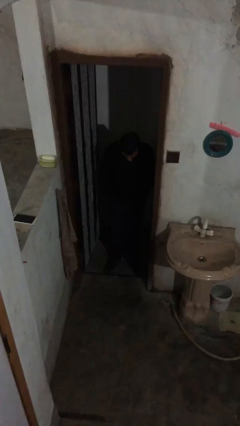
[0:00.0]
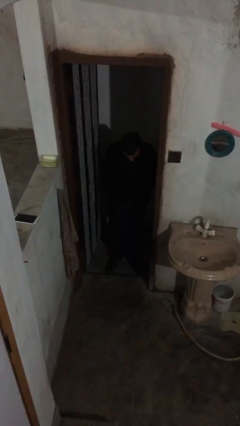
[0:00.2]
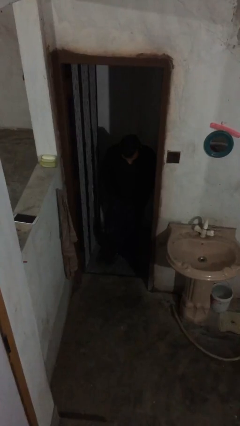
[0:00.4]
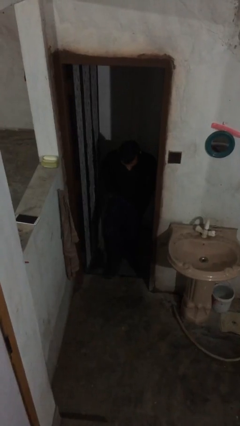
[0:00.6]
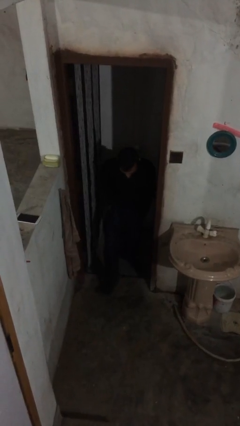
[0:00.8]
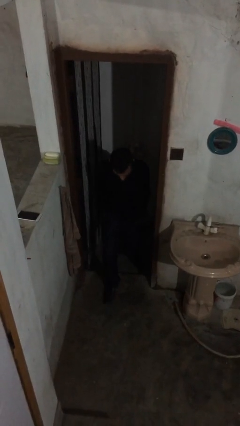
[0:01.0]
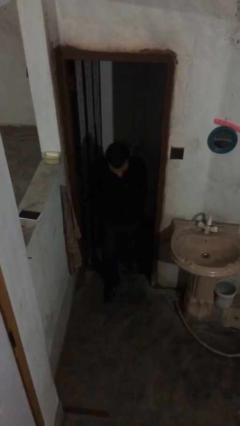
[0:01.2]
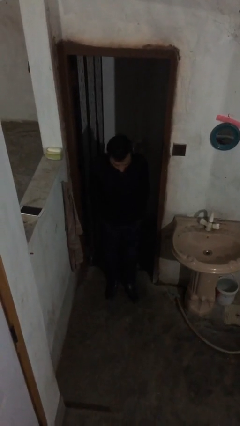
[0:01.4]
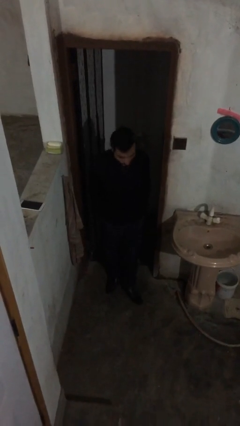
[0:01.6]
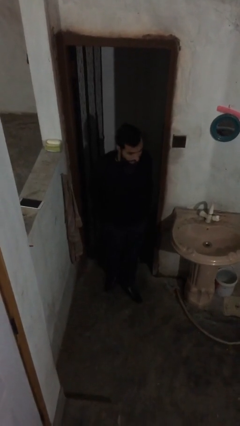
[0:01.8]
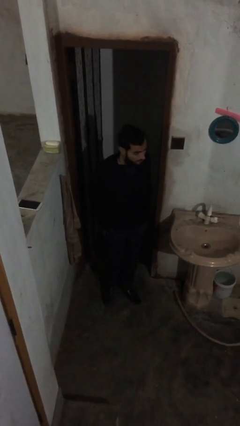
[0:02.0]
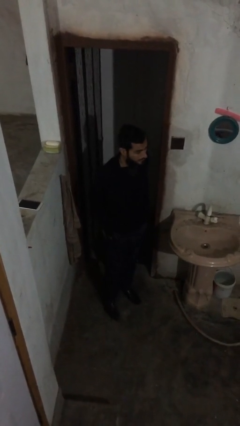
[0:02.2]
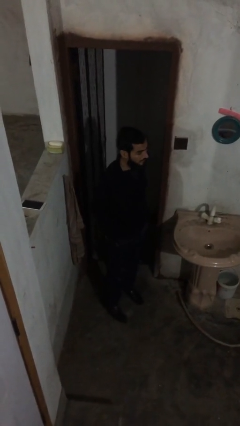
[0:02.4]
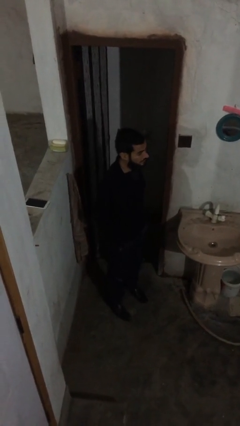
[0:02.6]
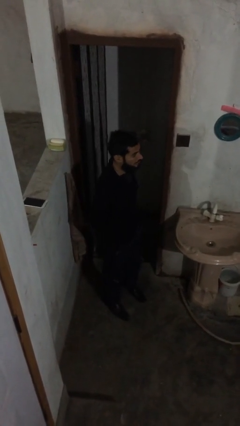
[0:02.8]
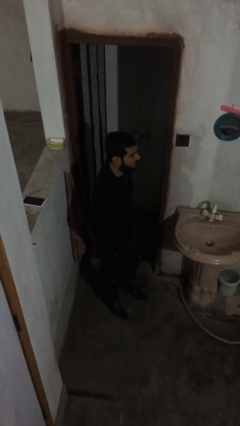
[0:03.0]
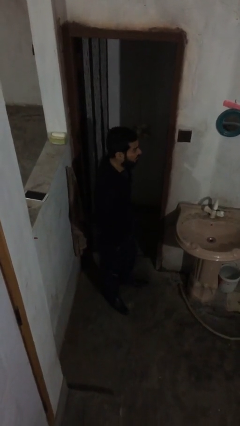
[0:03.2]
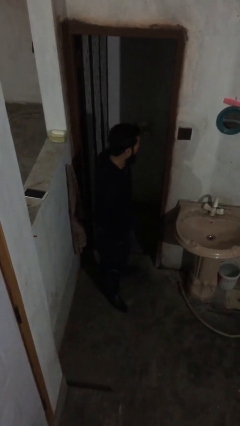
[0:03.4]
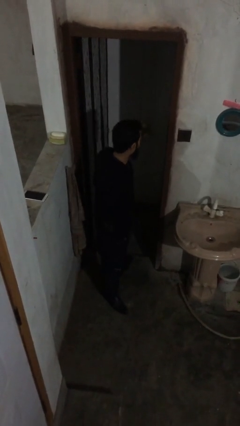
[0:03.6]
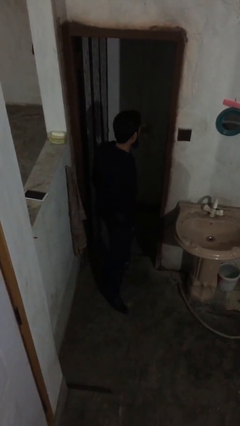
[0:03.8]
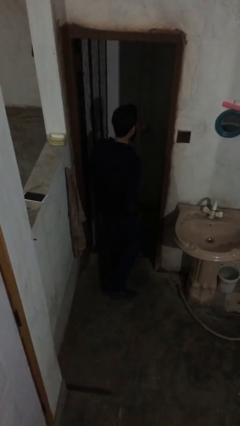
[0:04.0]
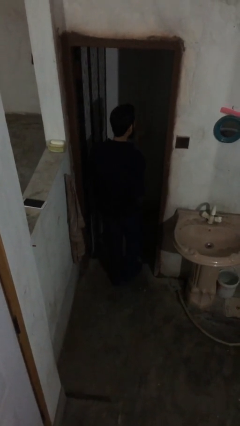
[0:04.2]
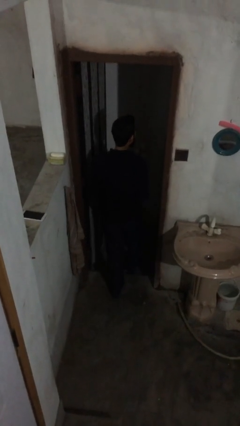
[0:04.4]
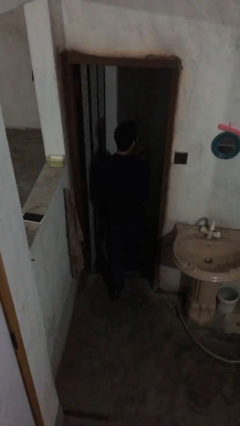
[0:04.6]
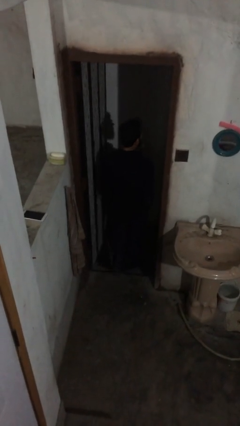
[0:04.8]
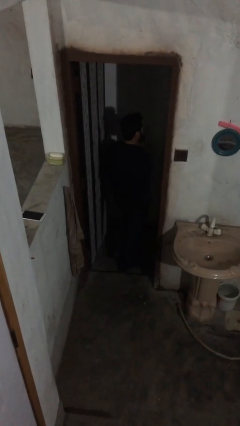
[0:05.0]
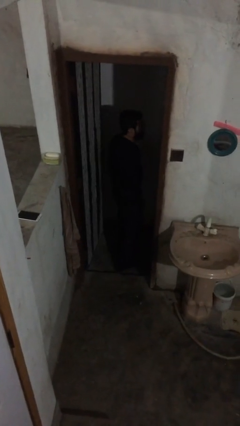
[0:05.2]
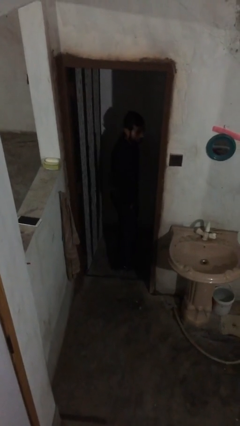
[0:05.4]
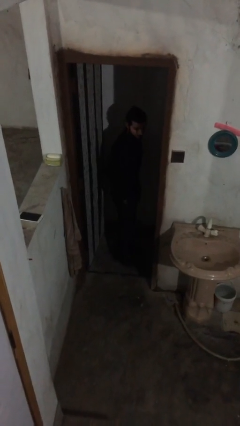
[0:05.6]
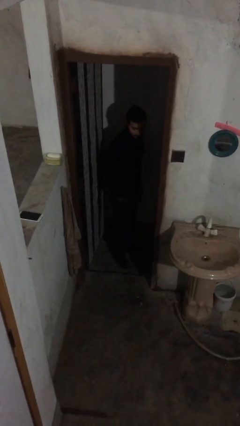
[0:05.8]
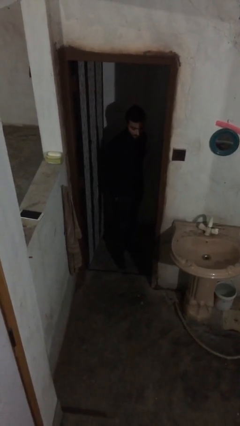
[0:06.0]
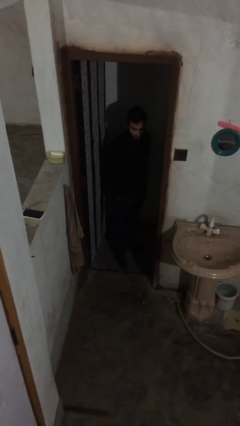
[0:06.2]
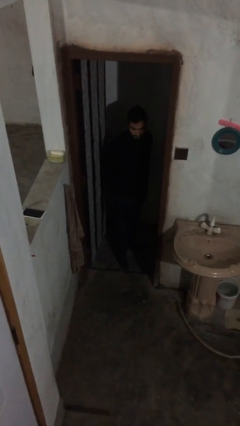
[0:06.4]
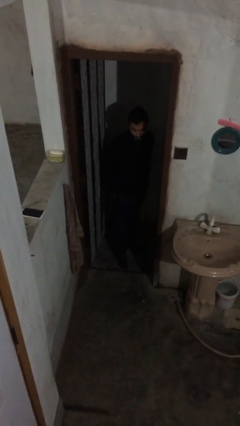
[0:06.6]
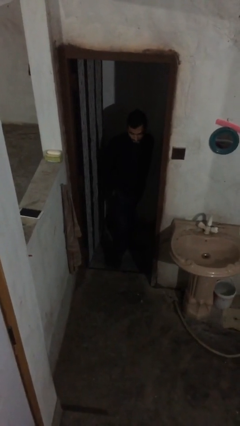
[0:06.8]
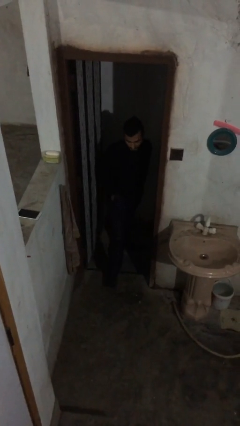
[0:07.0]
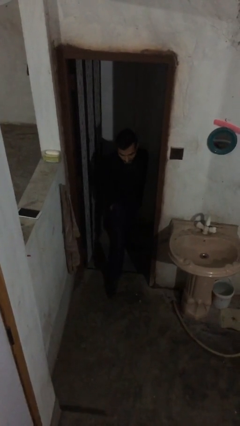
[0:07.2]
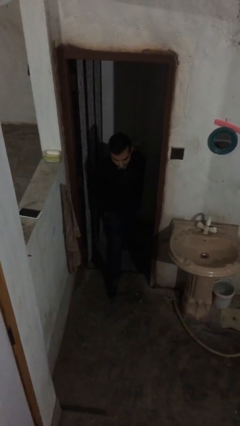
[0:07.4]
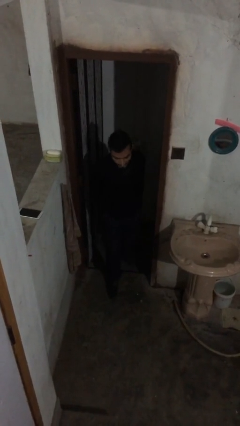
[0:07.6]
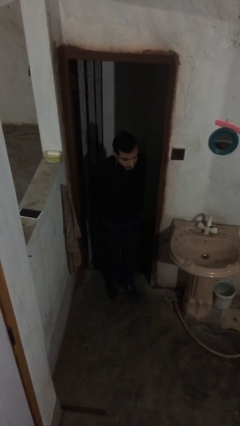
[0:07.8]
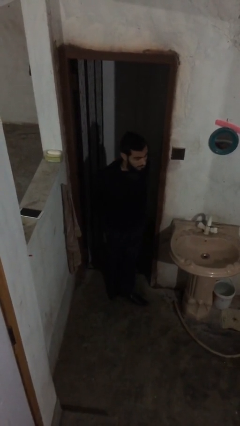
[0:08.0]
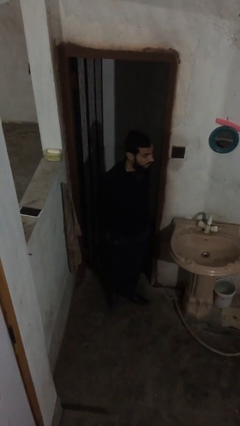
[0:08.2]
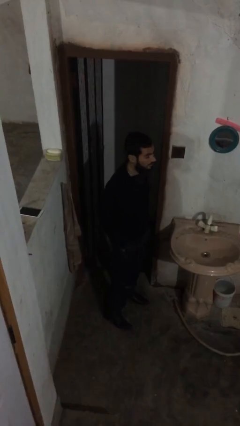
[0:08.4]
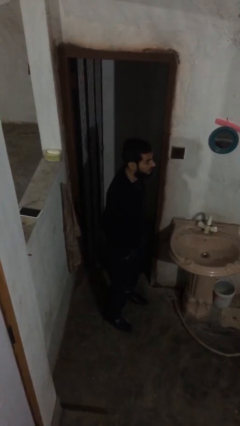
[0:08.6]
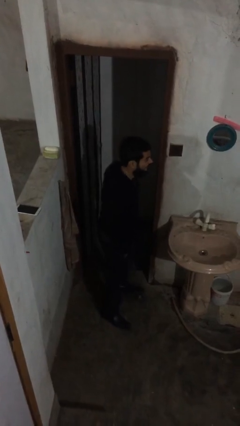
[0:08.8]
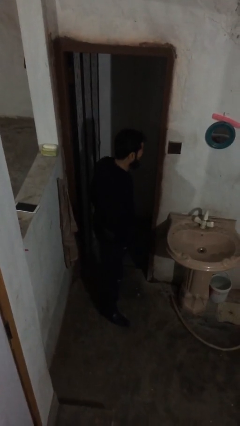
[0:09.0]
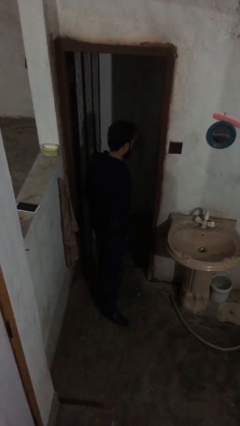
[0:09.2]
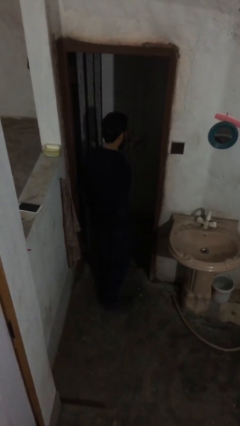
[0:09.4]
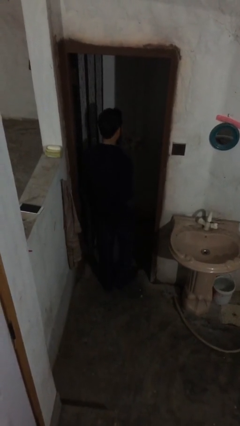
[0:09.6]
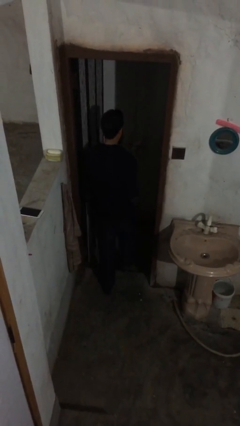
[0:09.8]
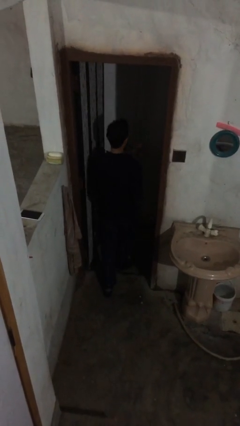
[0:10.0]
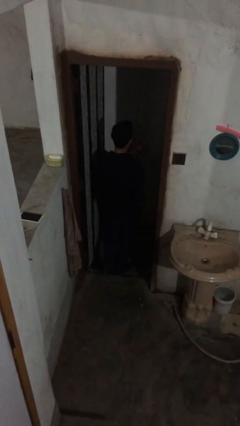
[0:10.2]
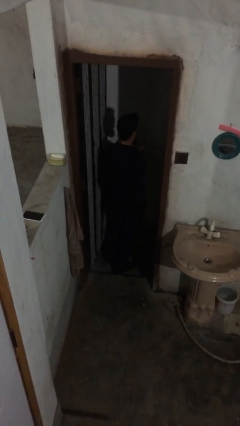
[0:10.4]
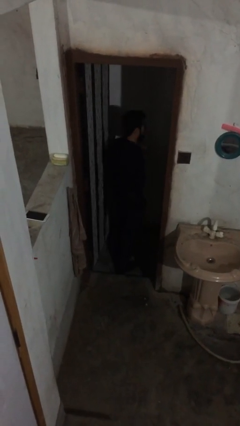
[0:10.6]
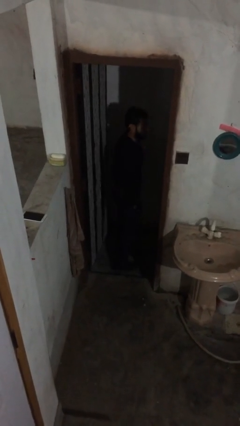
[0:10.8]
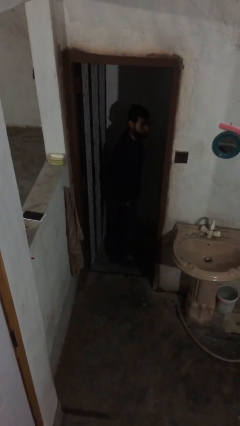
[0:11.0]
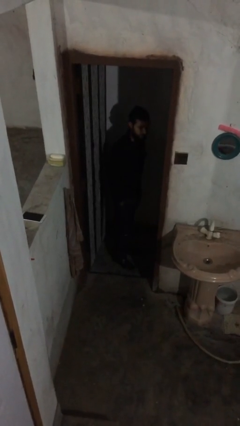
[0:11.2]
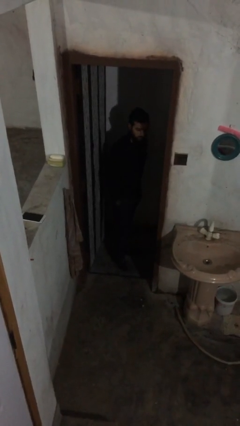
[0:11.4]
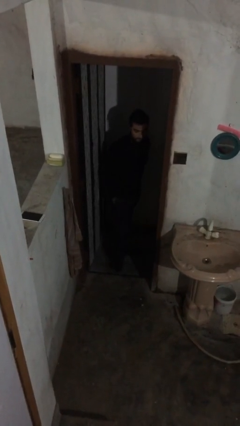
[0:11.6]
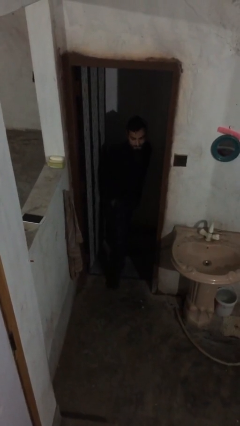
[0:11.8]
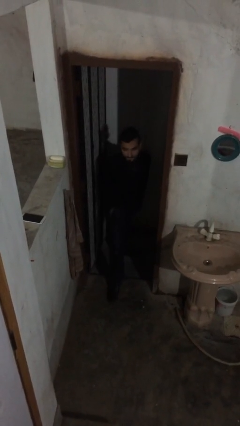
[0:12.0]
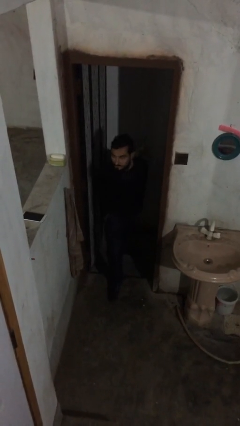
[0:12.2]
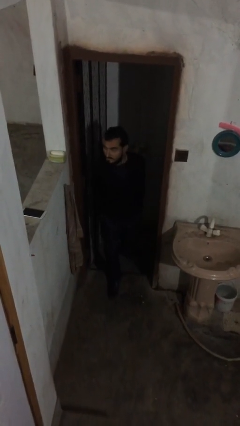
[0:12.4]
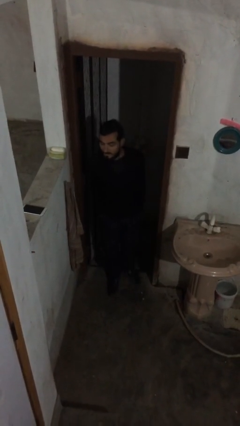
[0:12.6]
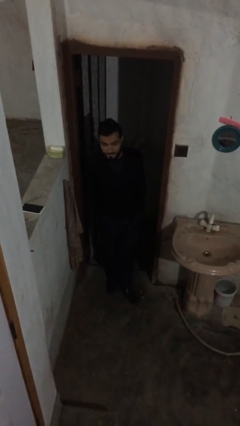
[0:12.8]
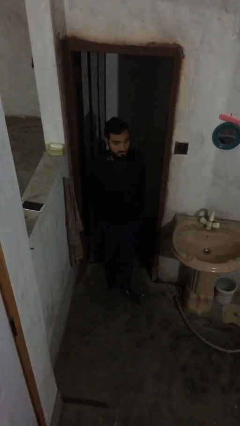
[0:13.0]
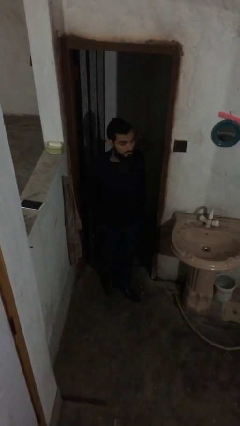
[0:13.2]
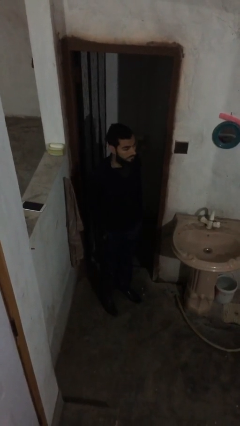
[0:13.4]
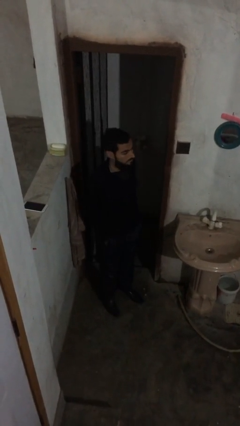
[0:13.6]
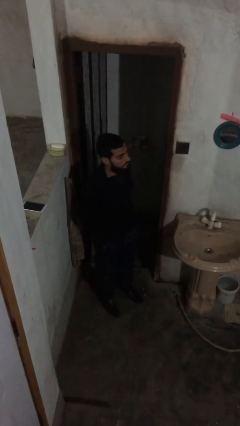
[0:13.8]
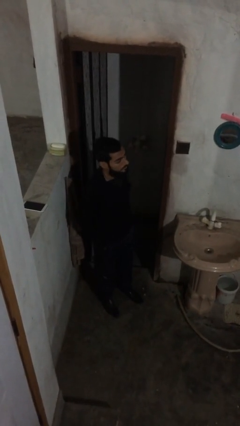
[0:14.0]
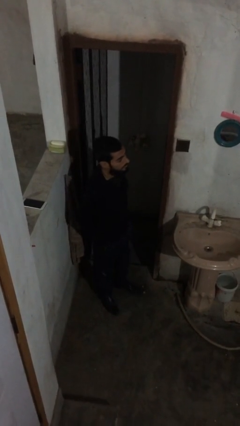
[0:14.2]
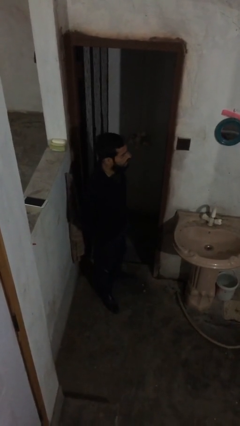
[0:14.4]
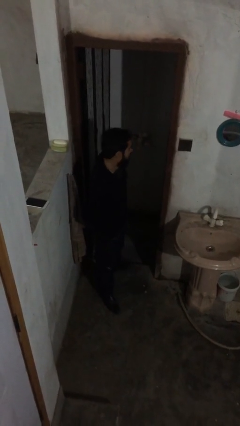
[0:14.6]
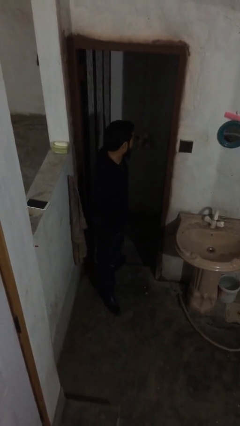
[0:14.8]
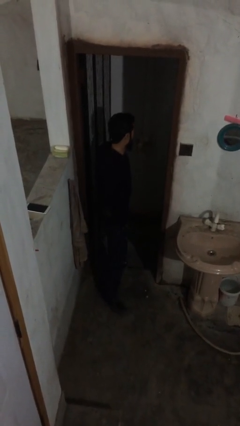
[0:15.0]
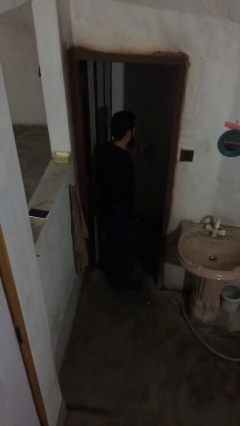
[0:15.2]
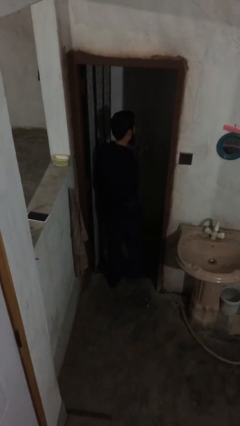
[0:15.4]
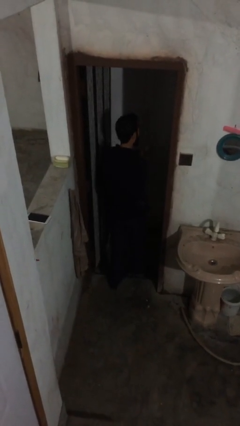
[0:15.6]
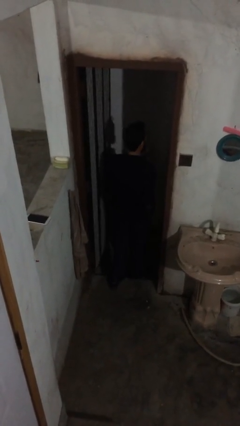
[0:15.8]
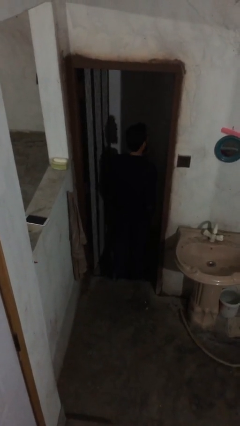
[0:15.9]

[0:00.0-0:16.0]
person texts on phone

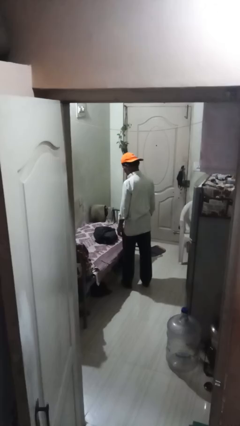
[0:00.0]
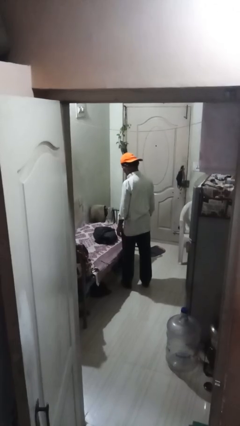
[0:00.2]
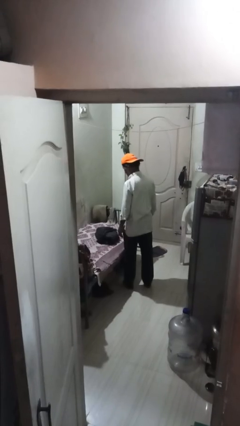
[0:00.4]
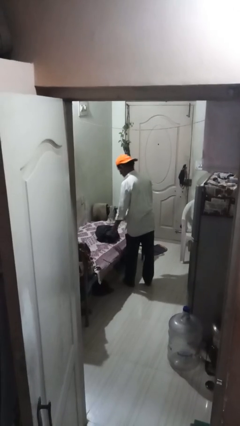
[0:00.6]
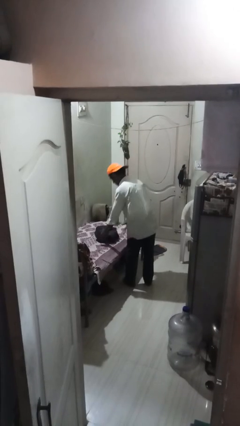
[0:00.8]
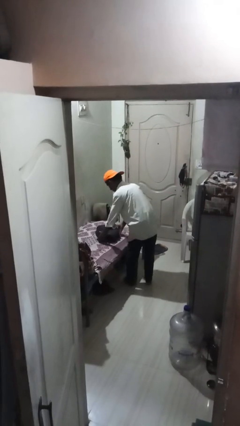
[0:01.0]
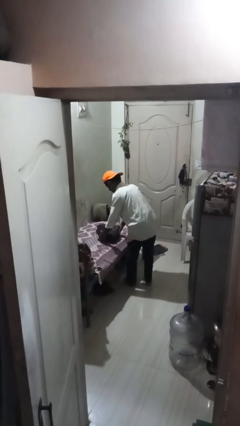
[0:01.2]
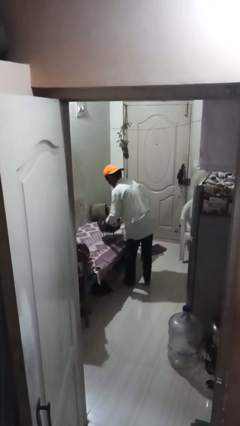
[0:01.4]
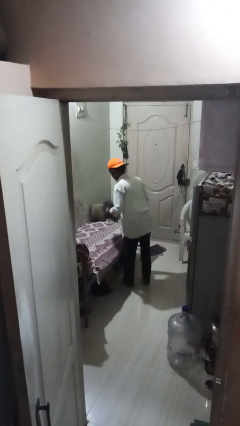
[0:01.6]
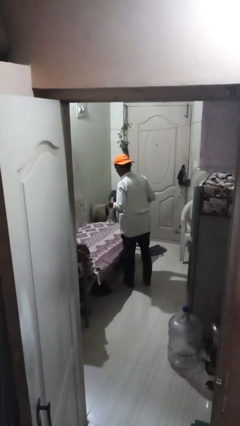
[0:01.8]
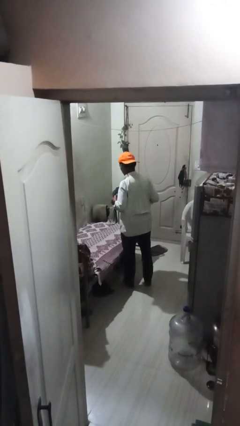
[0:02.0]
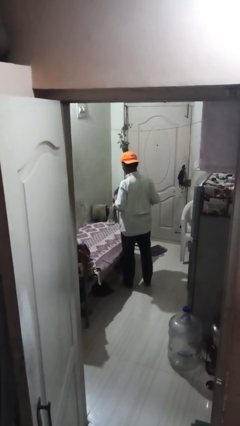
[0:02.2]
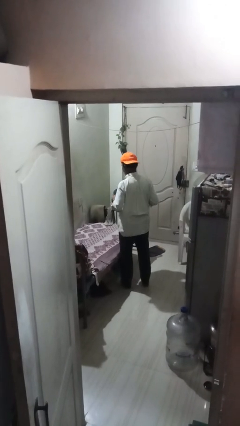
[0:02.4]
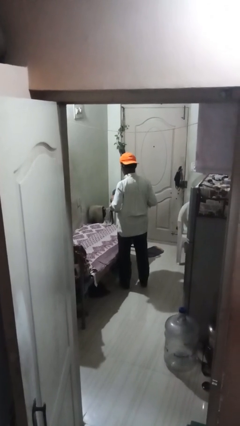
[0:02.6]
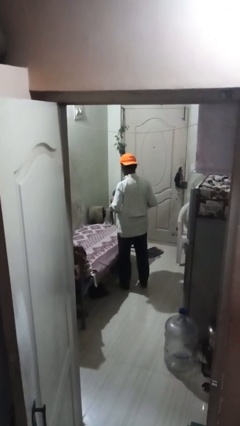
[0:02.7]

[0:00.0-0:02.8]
person picks up object from bed
